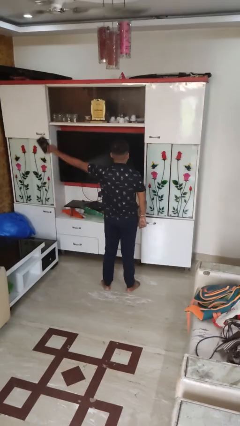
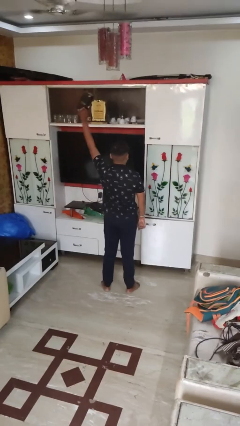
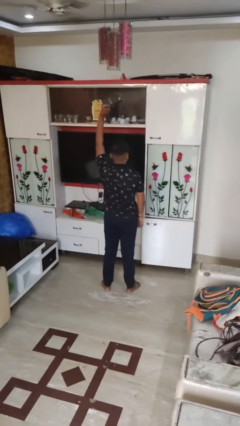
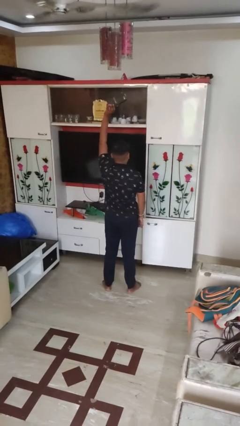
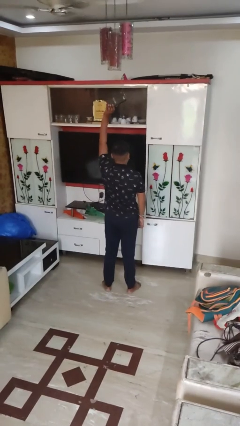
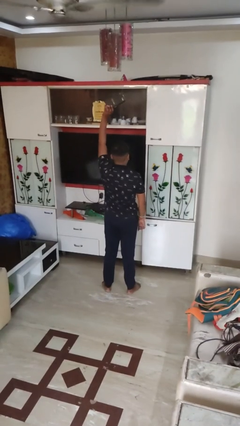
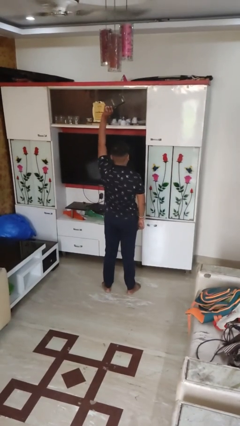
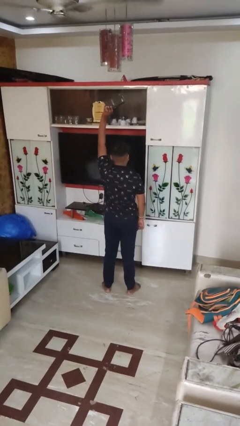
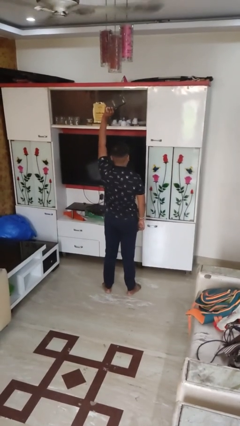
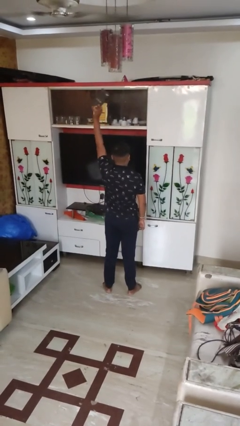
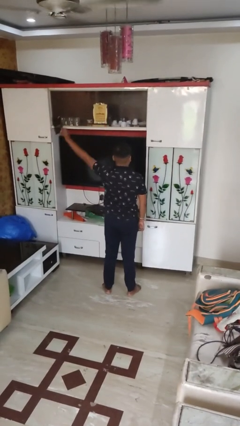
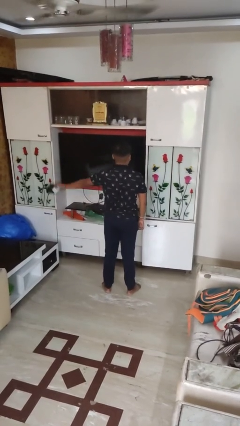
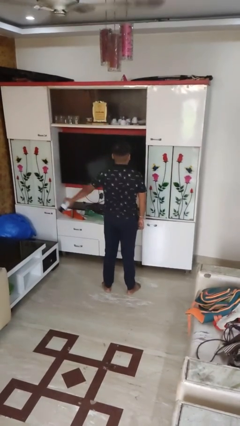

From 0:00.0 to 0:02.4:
person holds object above head

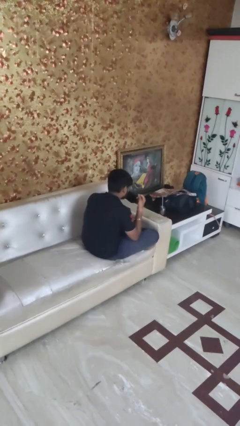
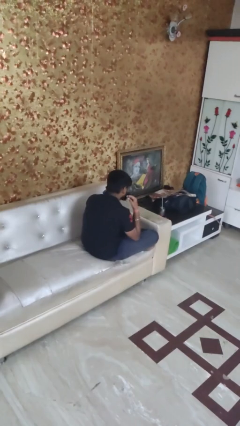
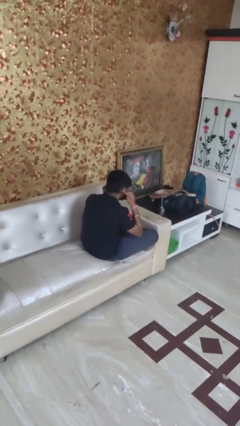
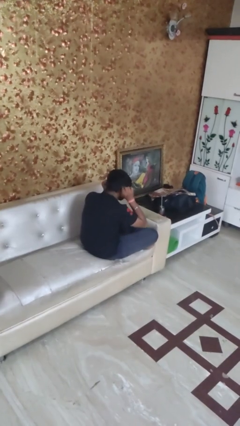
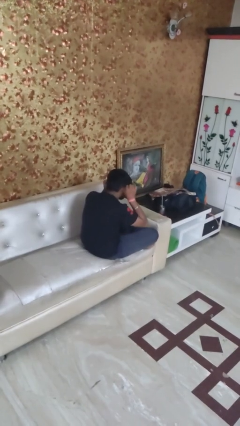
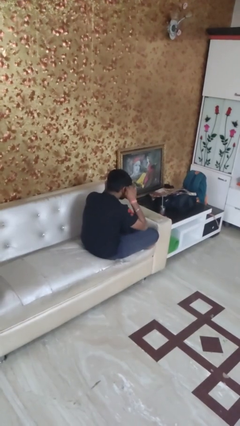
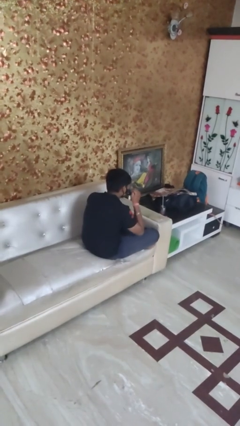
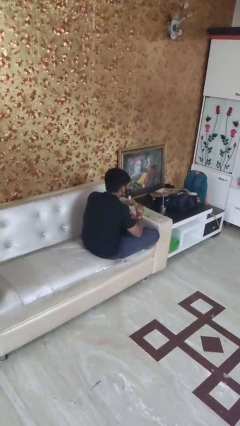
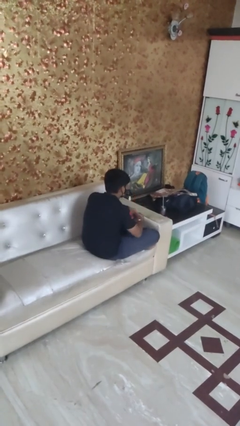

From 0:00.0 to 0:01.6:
person puts on facemask

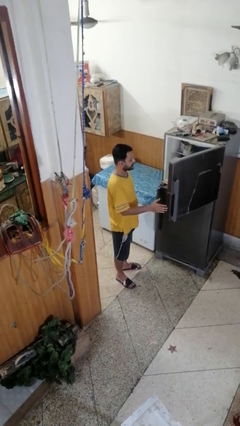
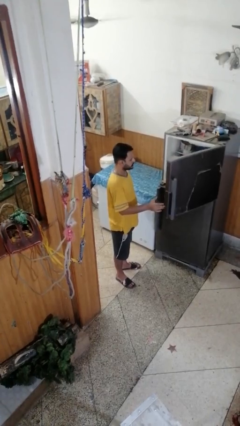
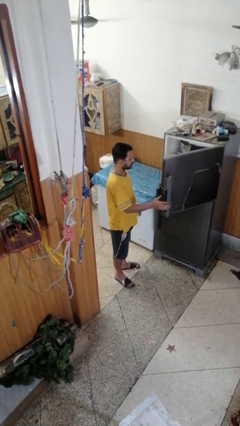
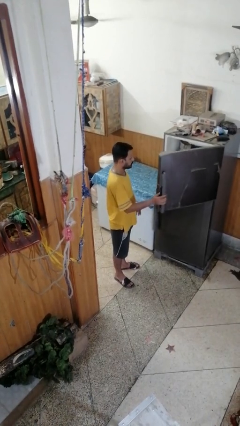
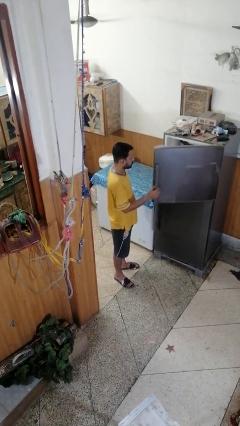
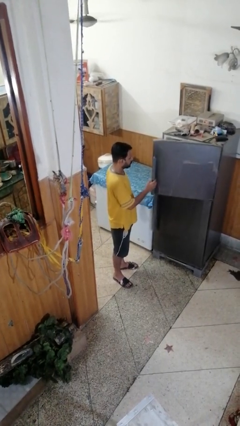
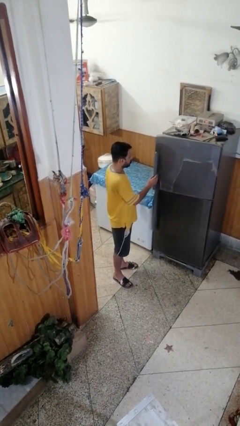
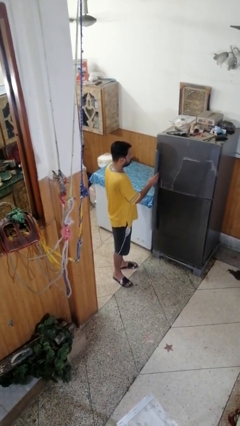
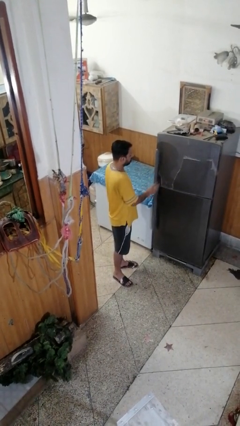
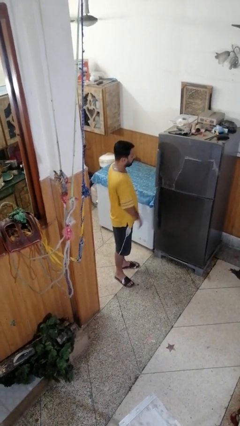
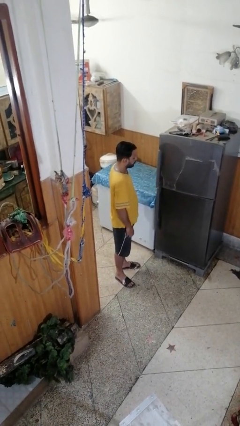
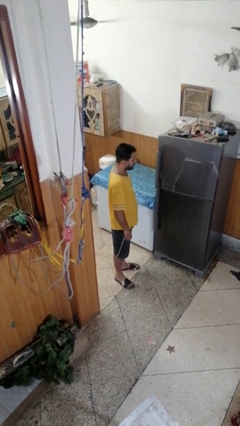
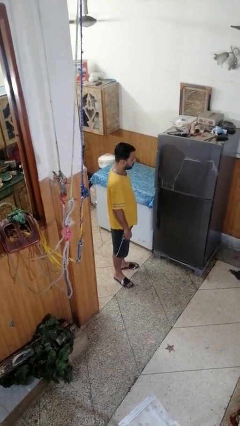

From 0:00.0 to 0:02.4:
person closes refrigerator

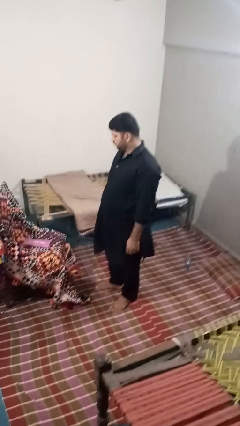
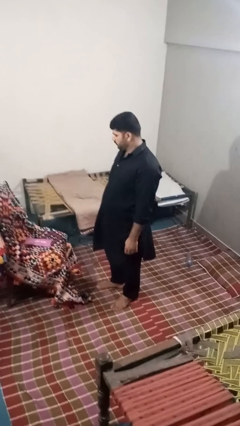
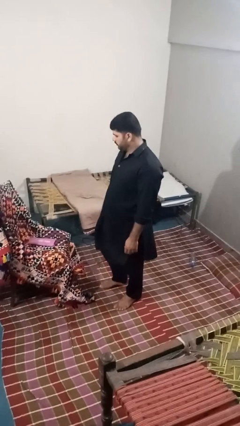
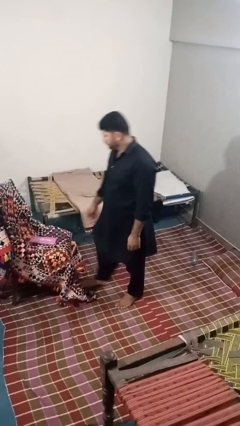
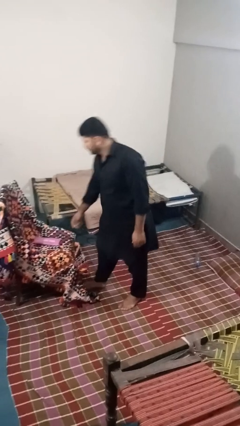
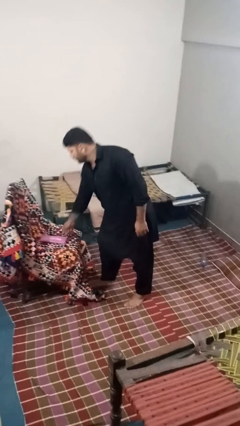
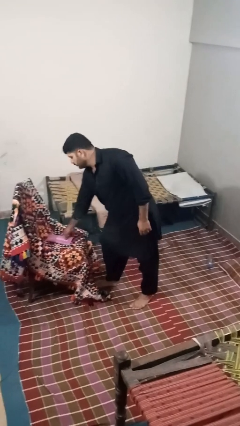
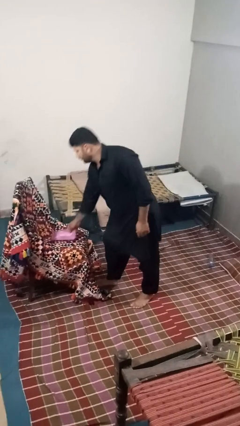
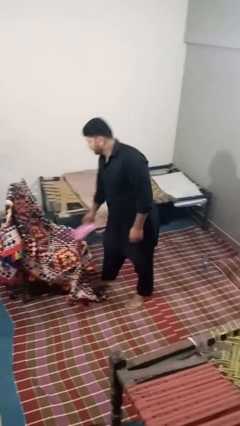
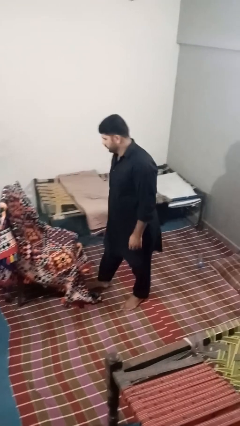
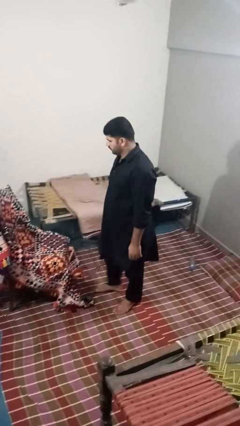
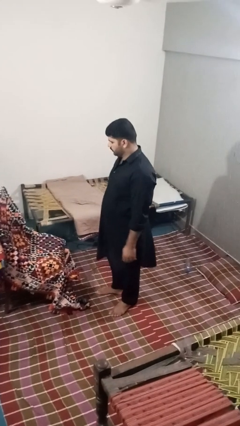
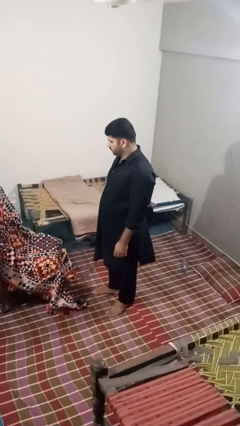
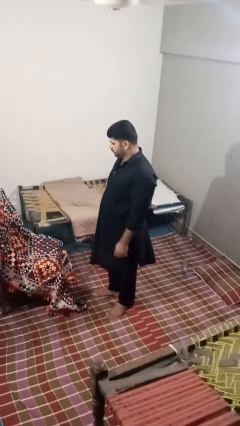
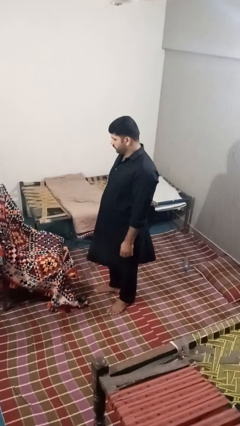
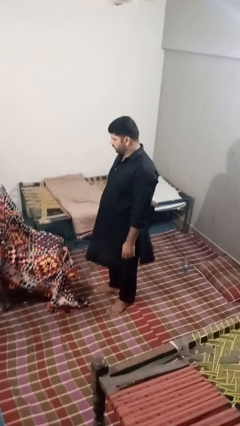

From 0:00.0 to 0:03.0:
person picks up object from couch

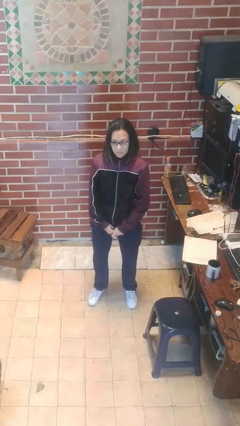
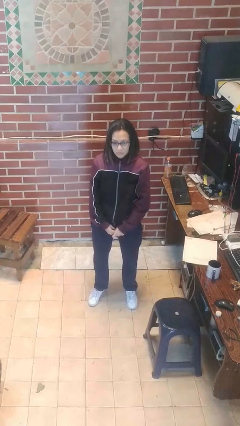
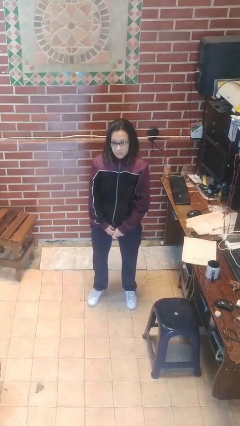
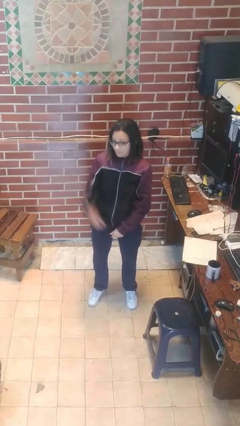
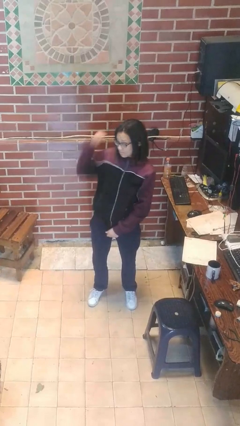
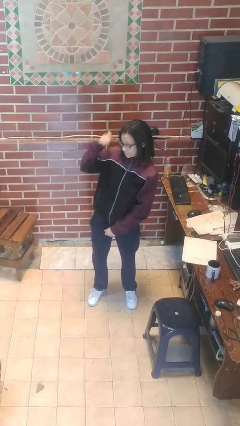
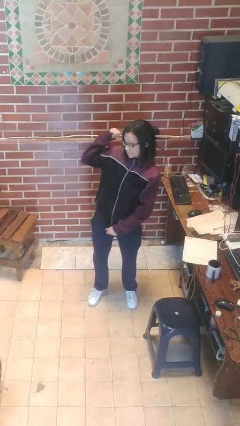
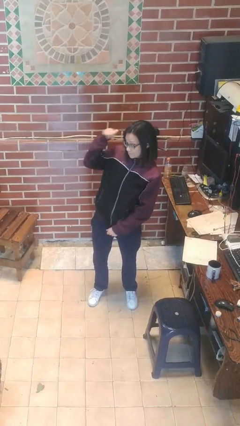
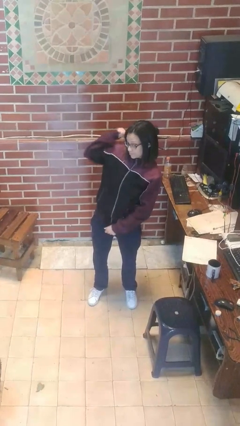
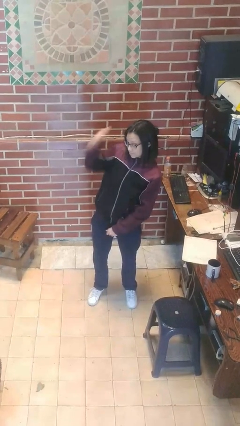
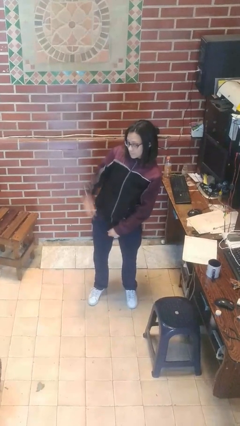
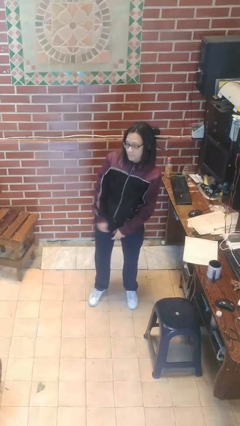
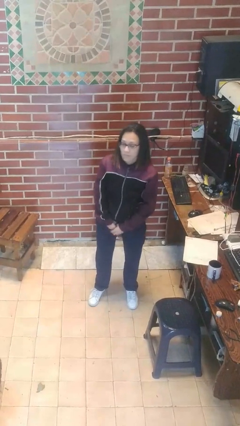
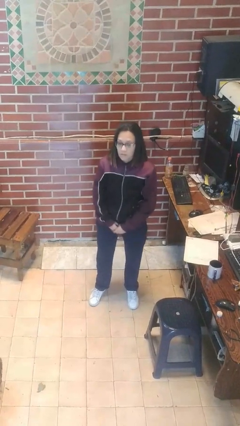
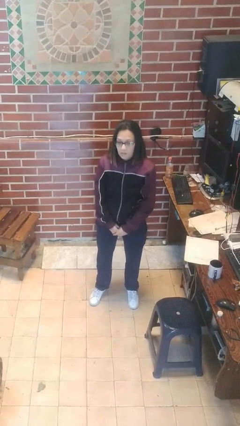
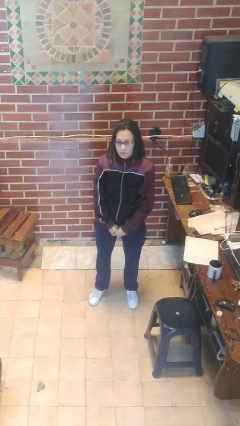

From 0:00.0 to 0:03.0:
person gestures behind me

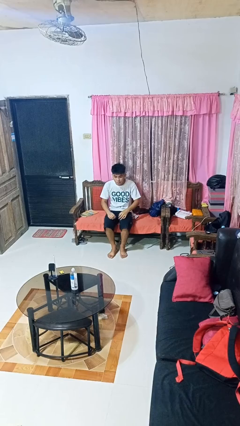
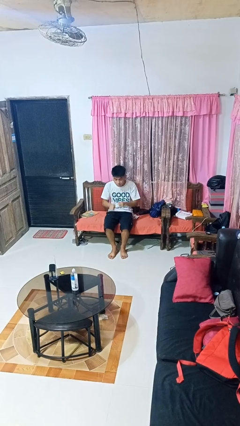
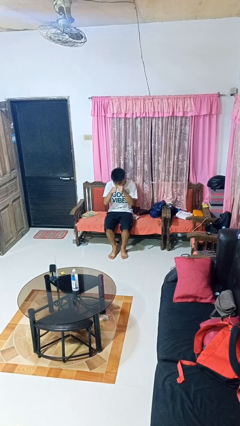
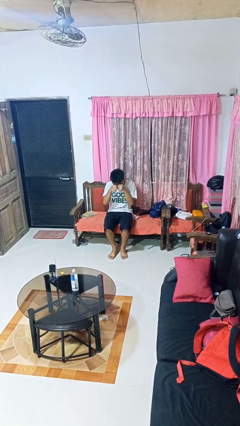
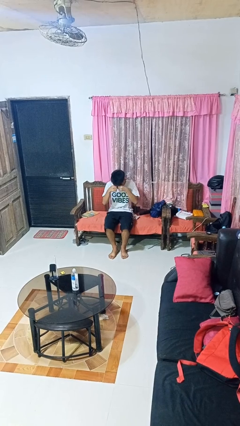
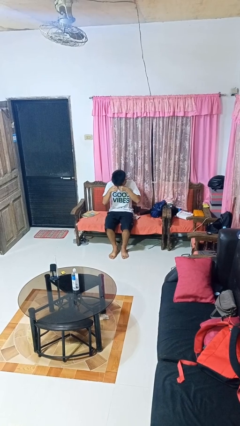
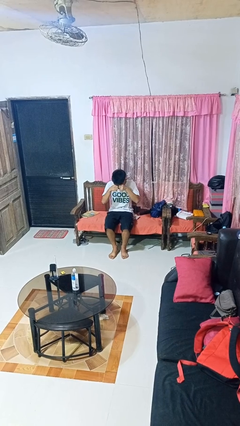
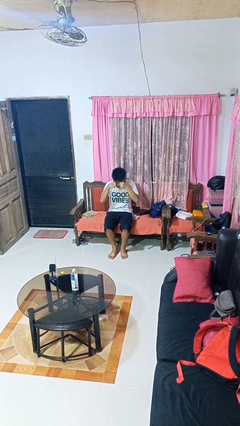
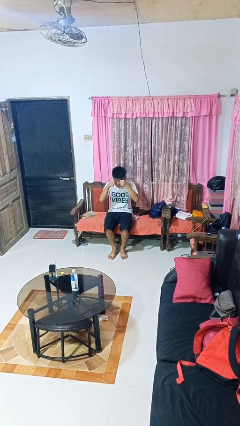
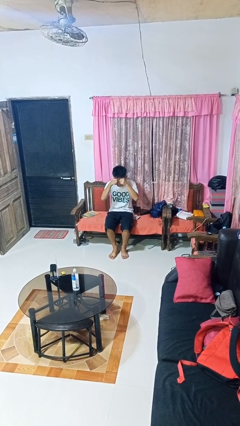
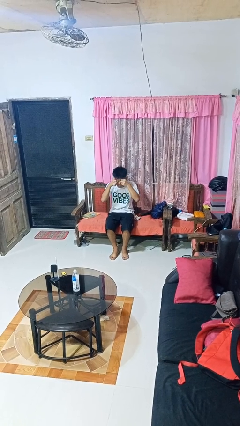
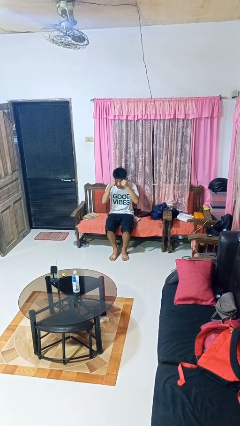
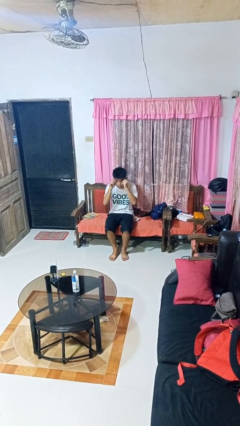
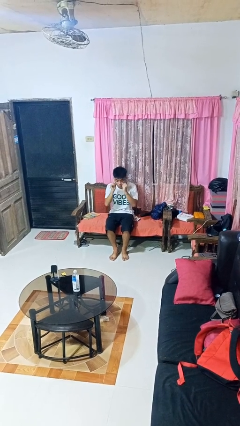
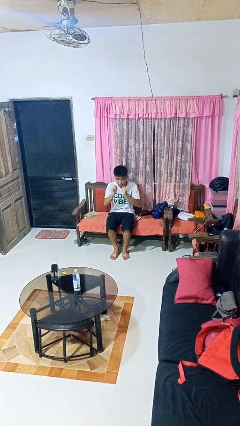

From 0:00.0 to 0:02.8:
person rubs eyes

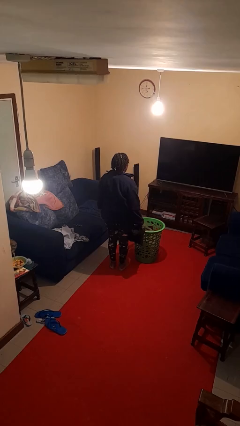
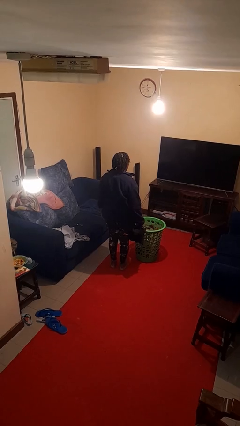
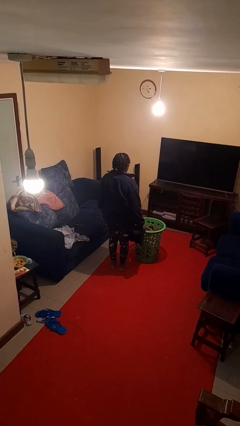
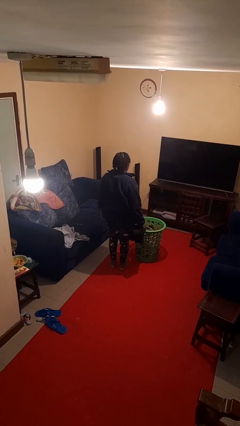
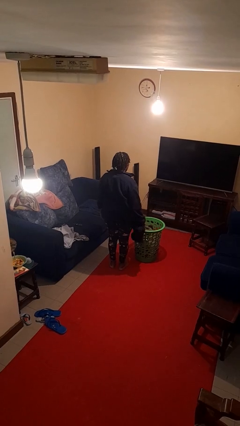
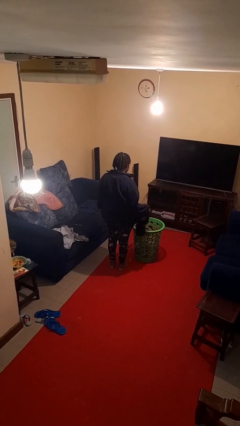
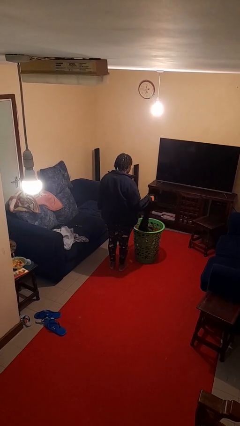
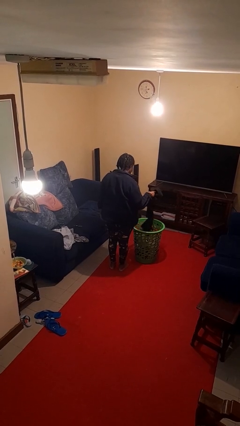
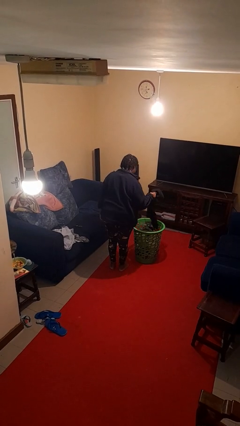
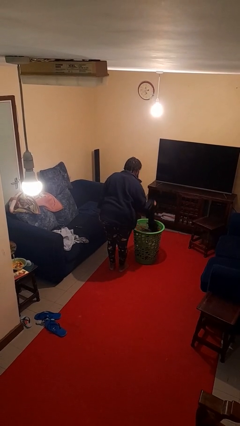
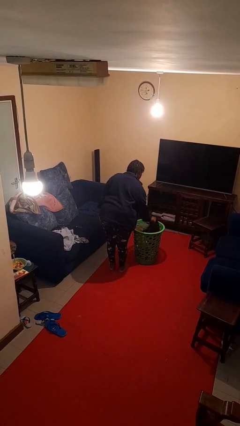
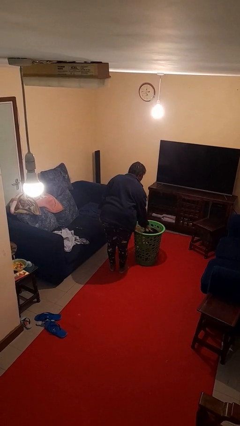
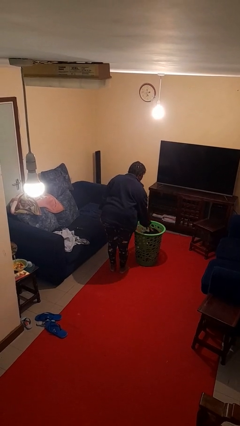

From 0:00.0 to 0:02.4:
person puts object into basket
